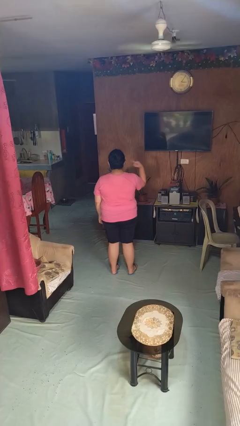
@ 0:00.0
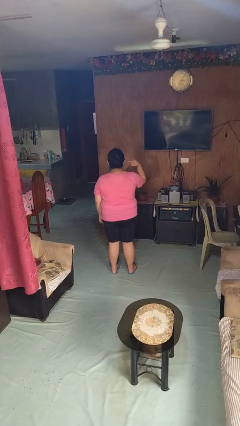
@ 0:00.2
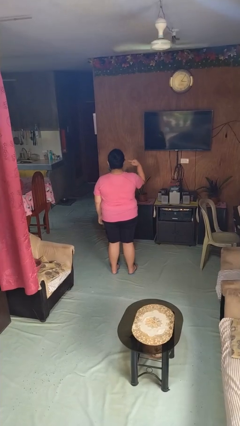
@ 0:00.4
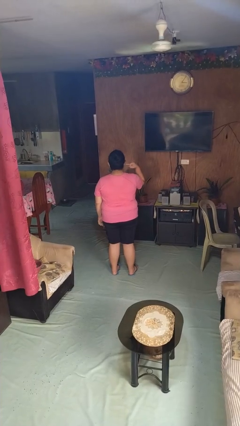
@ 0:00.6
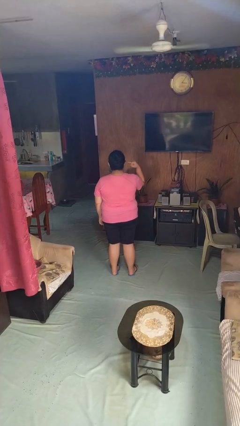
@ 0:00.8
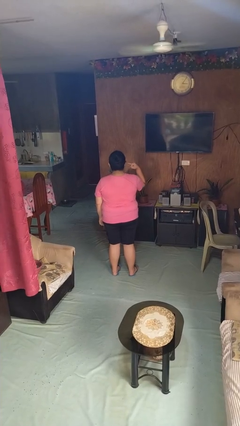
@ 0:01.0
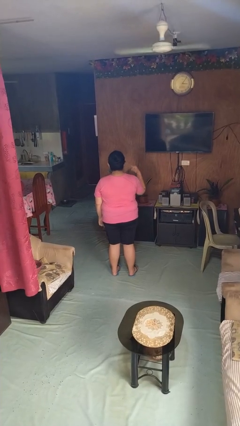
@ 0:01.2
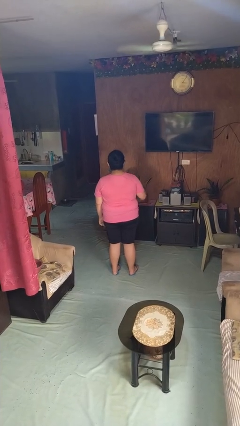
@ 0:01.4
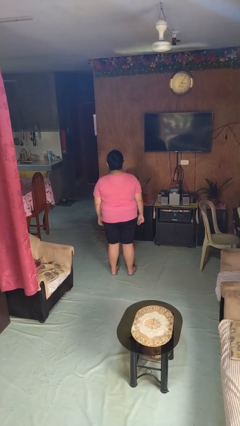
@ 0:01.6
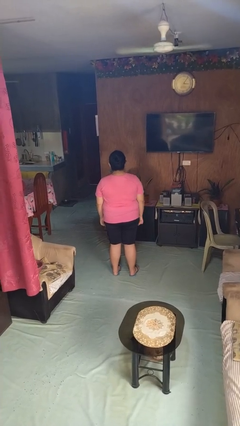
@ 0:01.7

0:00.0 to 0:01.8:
person gestures listen closely

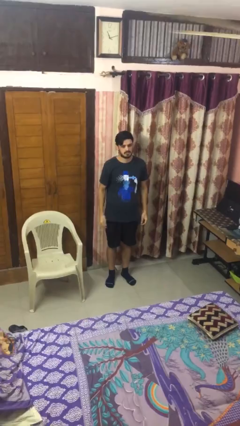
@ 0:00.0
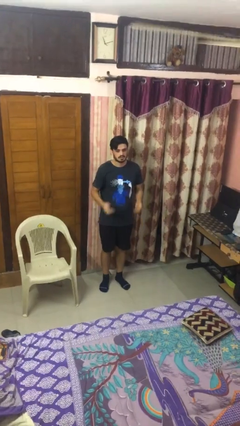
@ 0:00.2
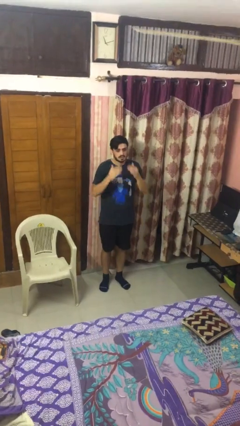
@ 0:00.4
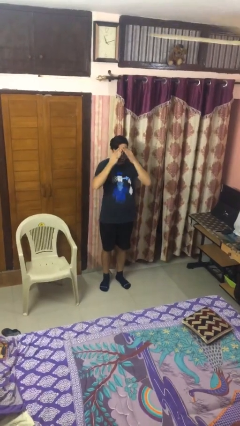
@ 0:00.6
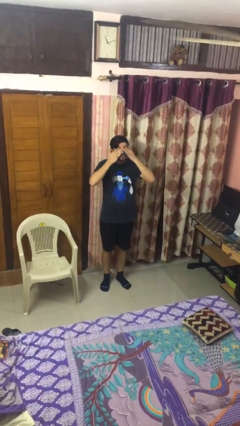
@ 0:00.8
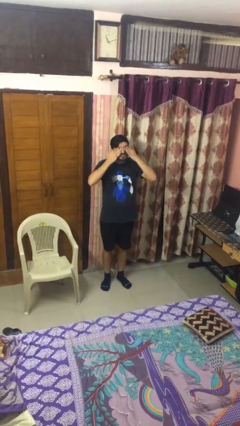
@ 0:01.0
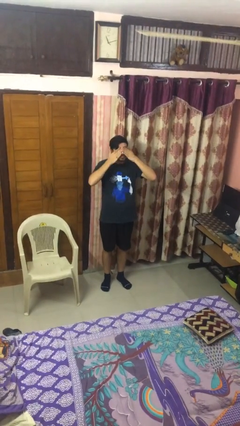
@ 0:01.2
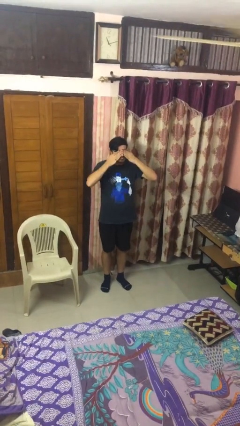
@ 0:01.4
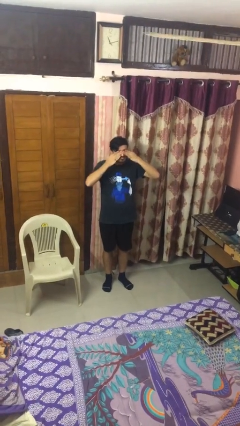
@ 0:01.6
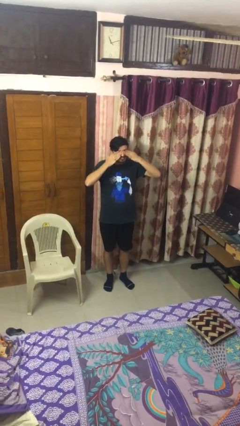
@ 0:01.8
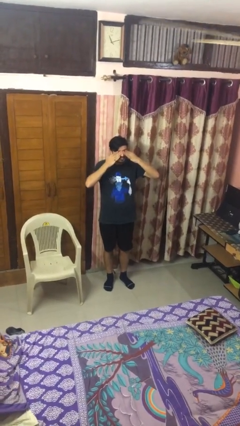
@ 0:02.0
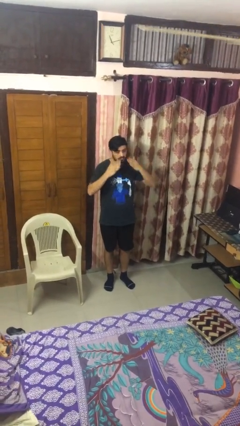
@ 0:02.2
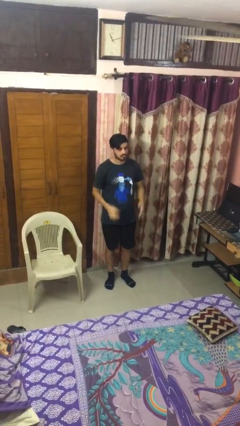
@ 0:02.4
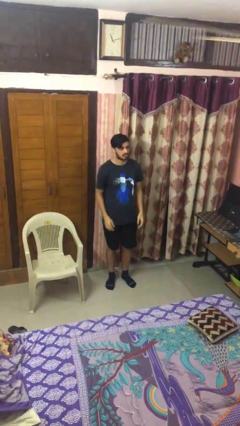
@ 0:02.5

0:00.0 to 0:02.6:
person rubs eyes

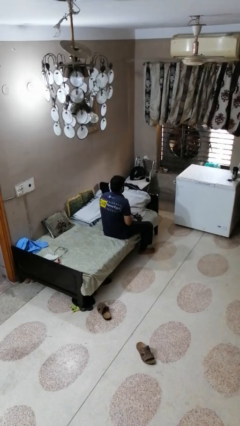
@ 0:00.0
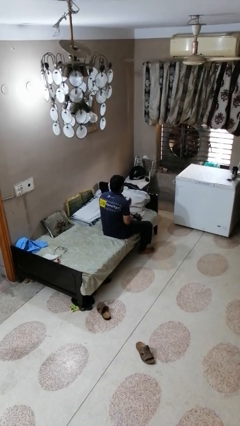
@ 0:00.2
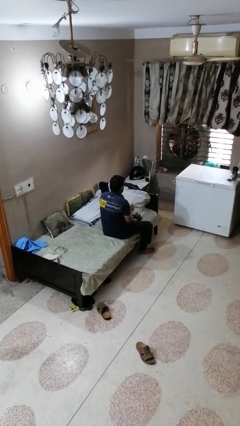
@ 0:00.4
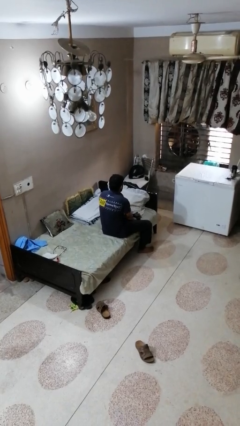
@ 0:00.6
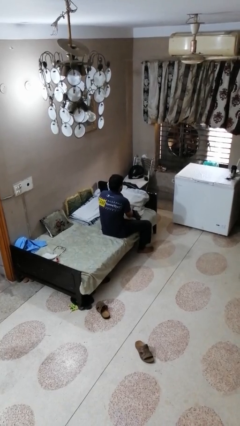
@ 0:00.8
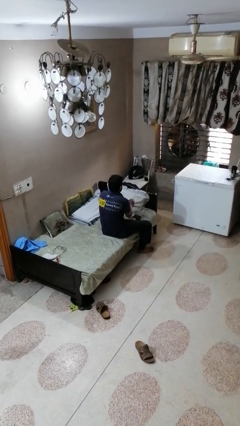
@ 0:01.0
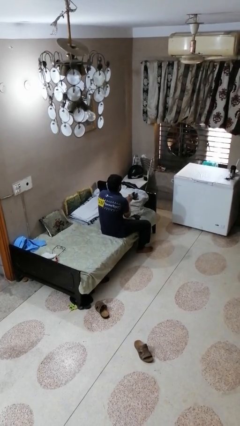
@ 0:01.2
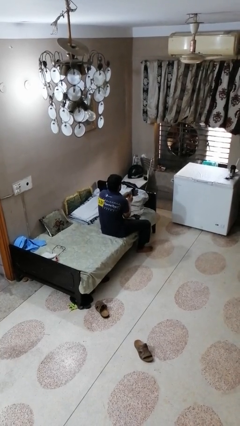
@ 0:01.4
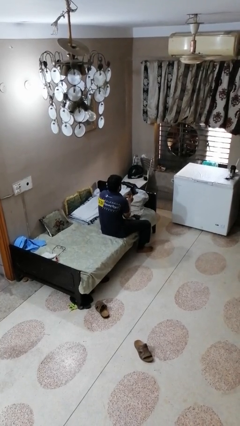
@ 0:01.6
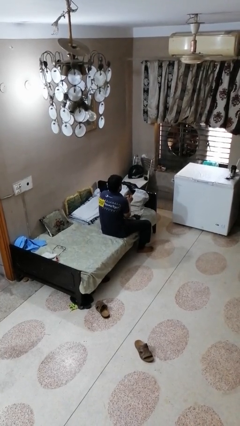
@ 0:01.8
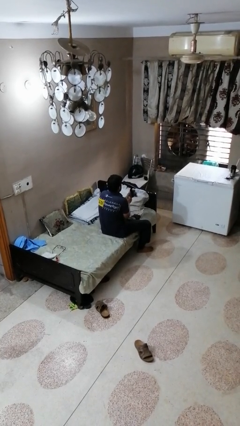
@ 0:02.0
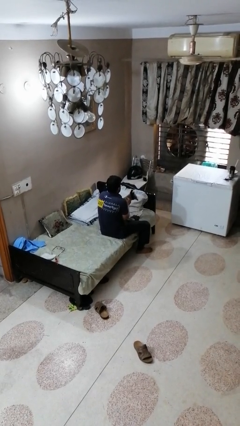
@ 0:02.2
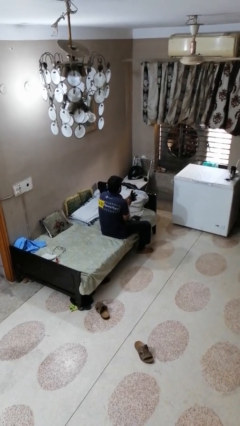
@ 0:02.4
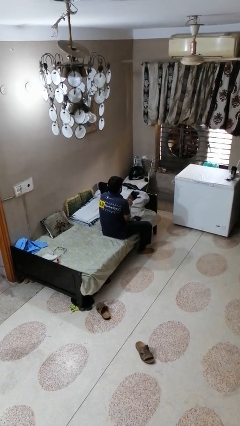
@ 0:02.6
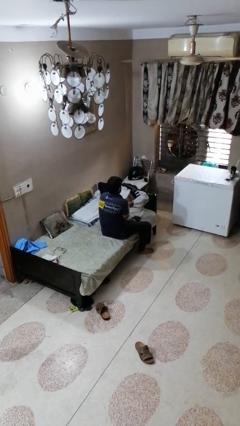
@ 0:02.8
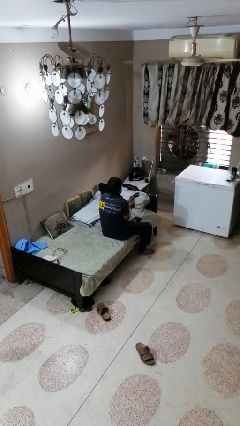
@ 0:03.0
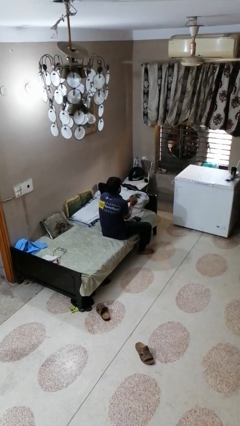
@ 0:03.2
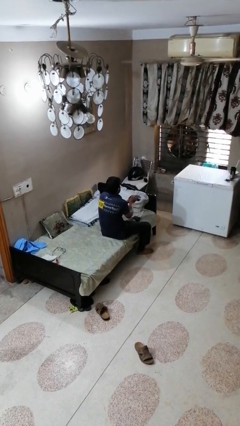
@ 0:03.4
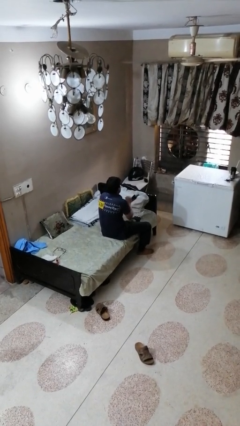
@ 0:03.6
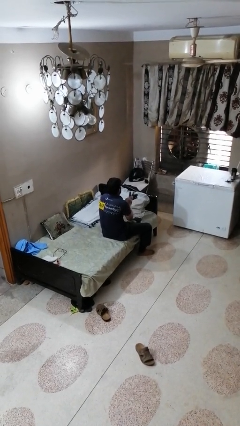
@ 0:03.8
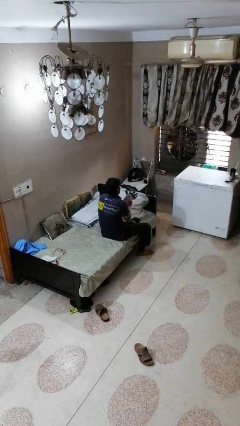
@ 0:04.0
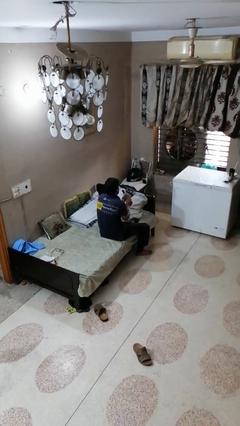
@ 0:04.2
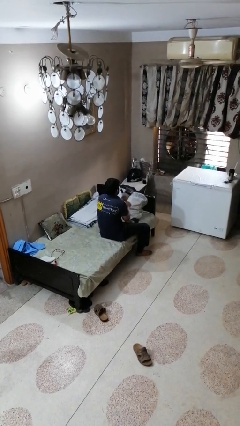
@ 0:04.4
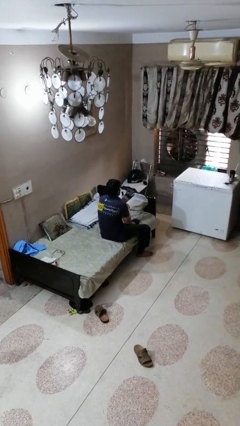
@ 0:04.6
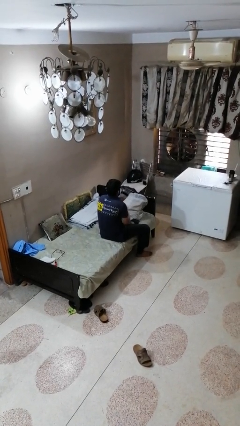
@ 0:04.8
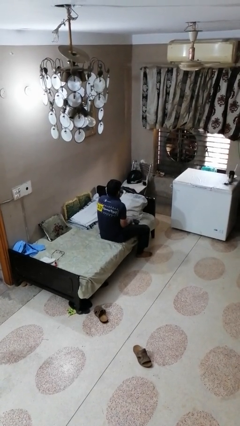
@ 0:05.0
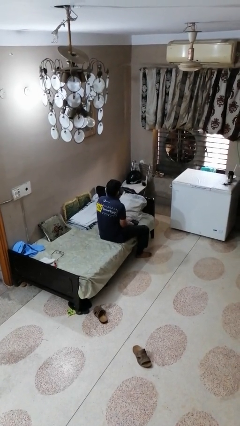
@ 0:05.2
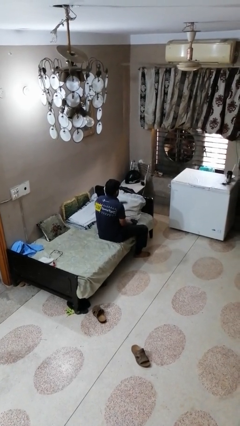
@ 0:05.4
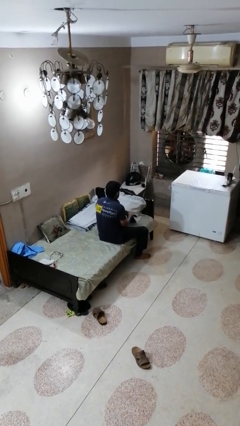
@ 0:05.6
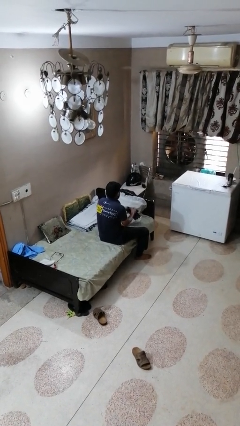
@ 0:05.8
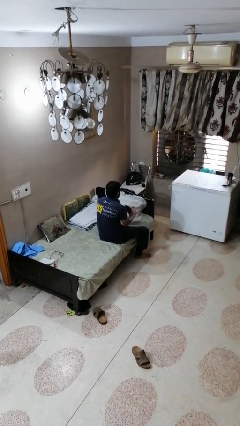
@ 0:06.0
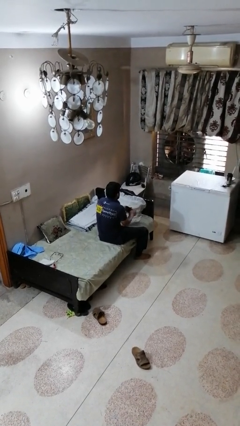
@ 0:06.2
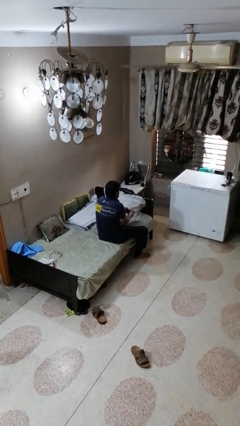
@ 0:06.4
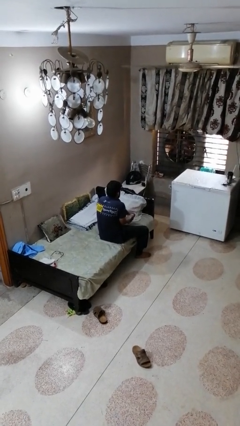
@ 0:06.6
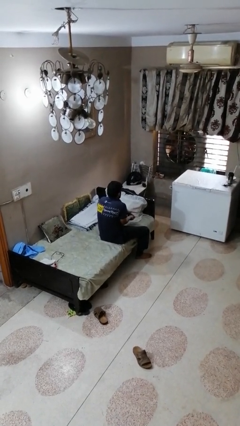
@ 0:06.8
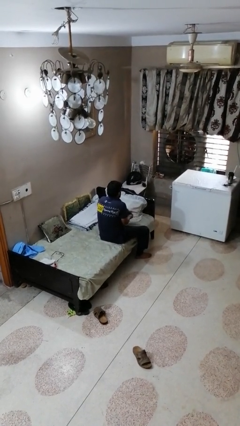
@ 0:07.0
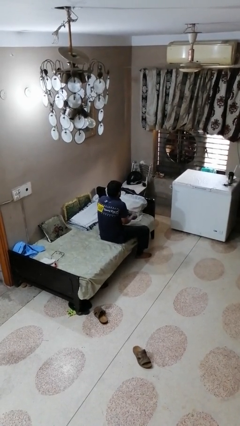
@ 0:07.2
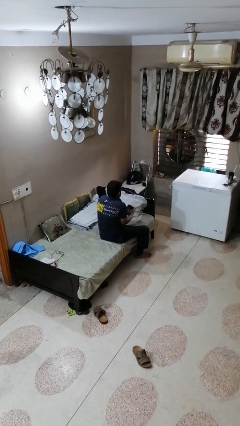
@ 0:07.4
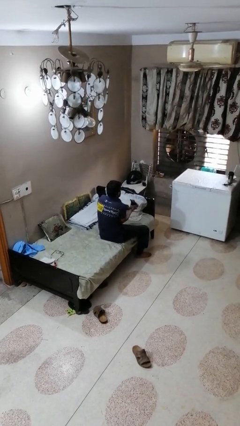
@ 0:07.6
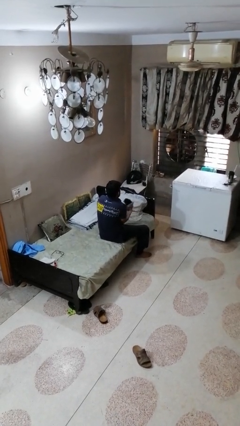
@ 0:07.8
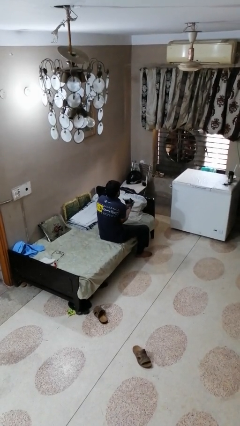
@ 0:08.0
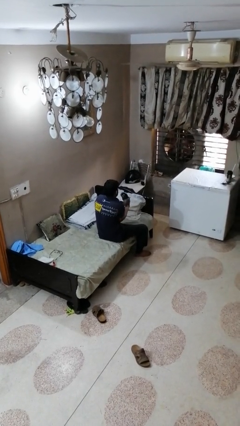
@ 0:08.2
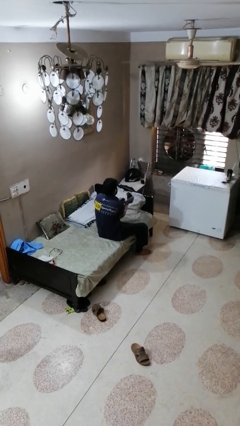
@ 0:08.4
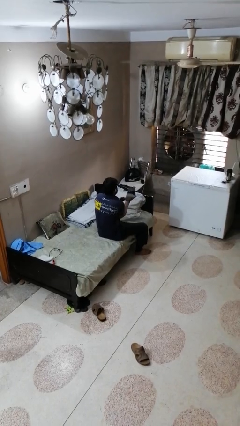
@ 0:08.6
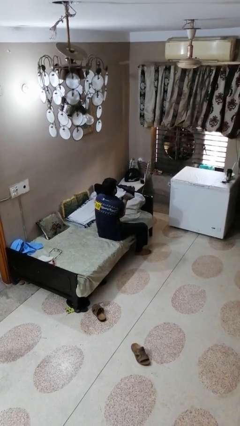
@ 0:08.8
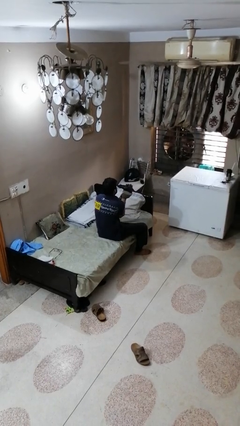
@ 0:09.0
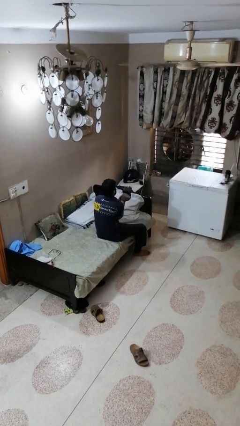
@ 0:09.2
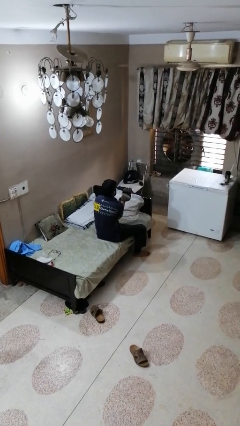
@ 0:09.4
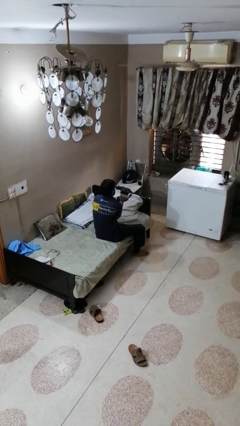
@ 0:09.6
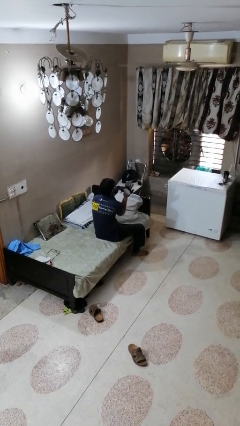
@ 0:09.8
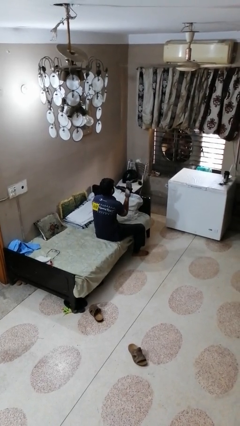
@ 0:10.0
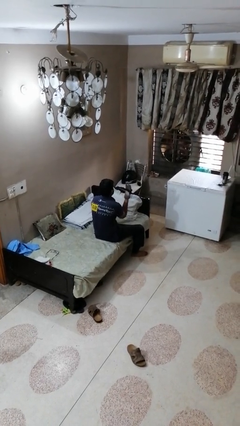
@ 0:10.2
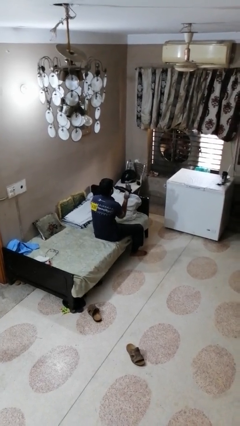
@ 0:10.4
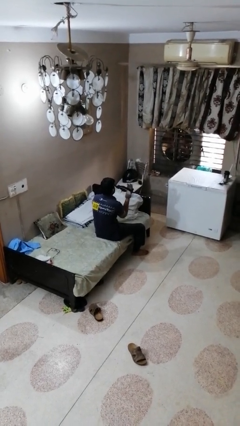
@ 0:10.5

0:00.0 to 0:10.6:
person puts on gloves

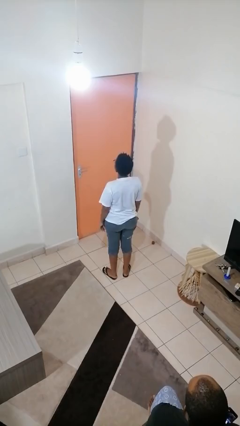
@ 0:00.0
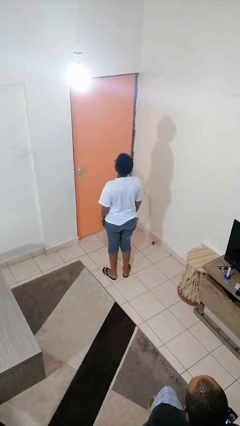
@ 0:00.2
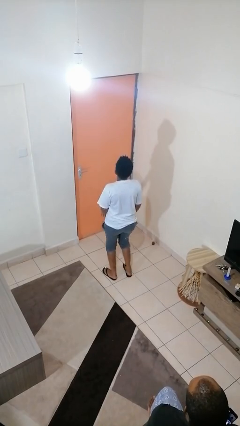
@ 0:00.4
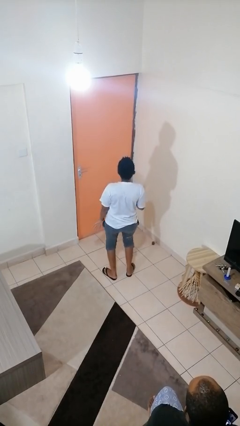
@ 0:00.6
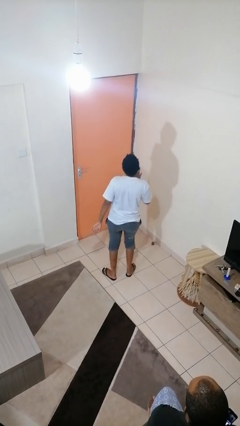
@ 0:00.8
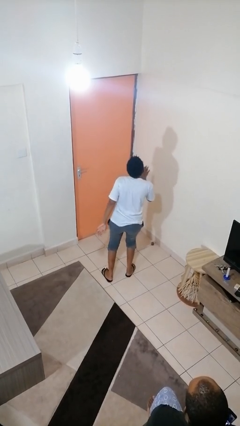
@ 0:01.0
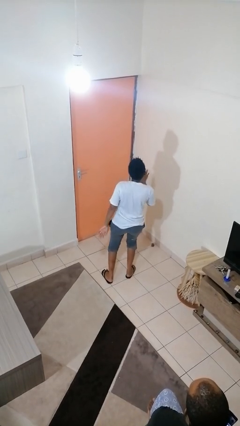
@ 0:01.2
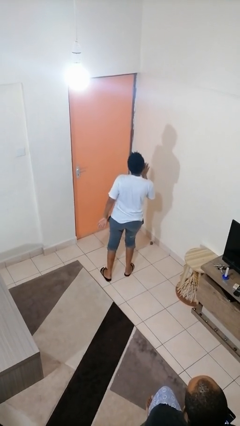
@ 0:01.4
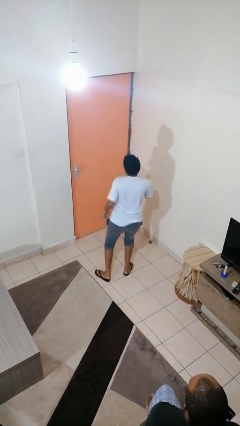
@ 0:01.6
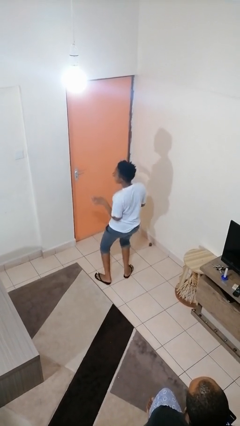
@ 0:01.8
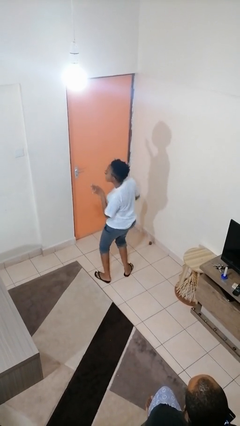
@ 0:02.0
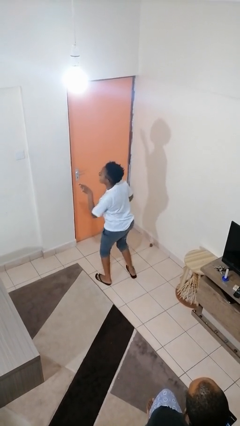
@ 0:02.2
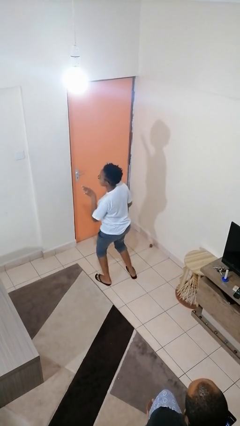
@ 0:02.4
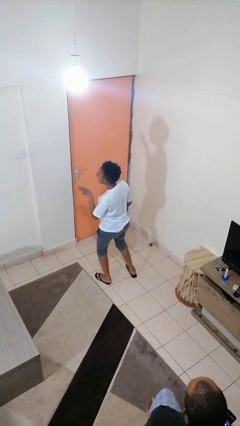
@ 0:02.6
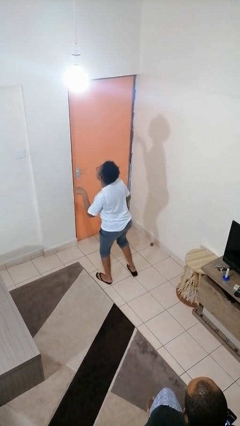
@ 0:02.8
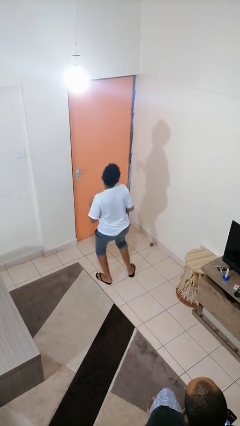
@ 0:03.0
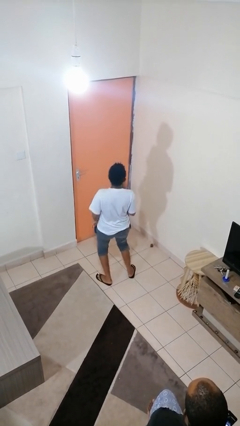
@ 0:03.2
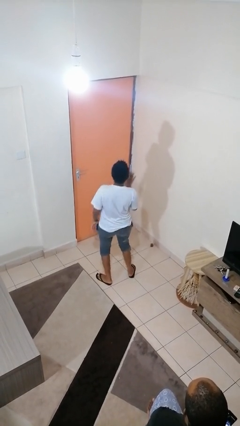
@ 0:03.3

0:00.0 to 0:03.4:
person dances in place
